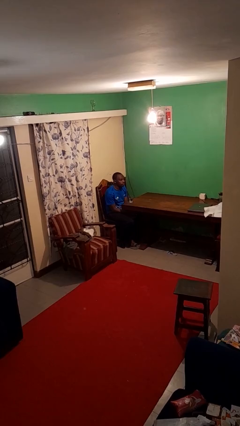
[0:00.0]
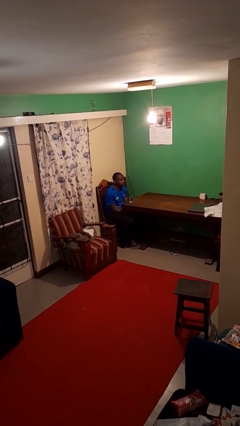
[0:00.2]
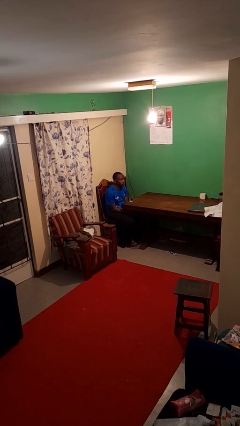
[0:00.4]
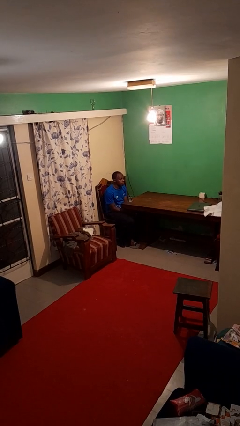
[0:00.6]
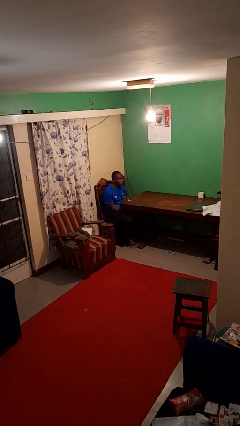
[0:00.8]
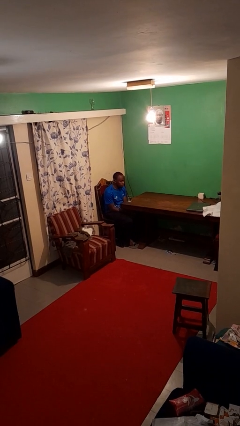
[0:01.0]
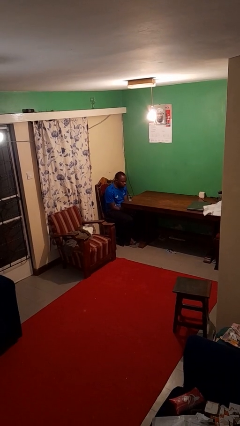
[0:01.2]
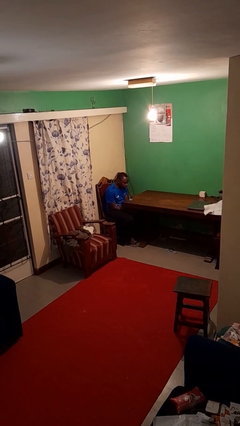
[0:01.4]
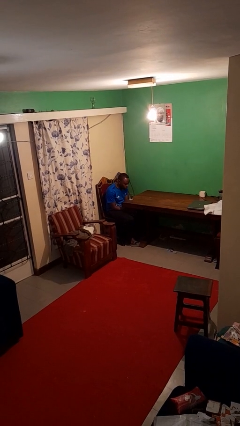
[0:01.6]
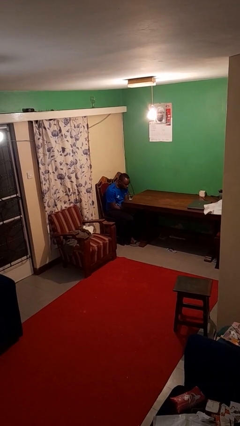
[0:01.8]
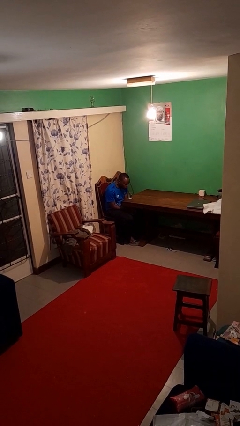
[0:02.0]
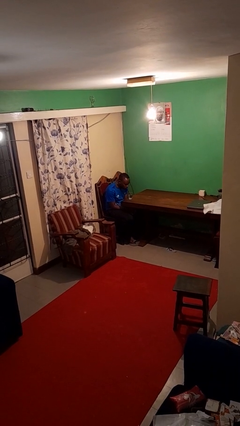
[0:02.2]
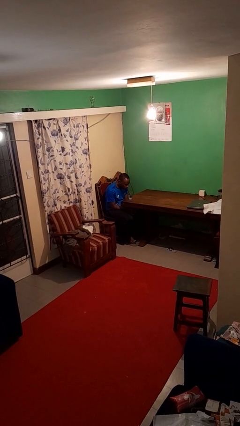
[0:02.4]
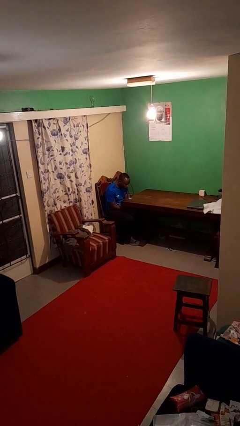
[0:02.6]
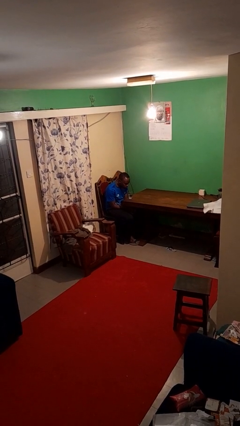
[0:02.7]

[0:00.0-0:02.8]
person drinks from straw

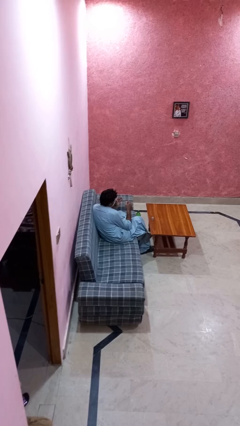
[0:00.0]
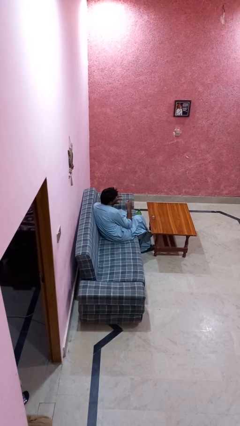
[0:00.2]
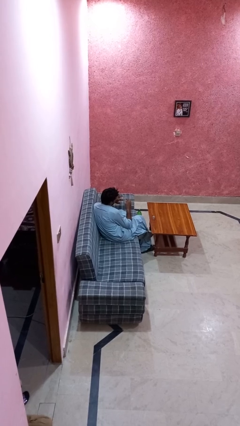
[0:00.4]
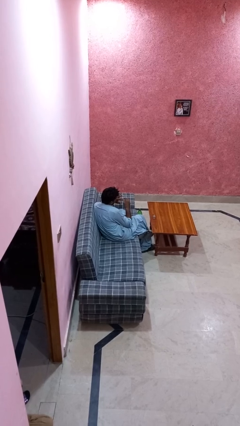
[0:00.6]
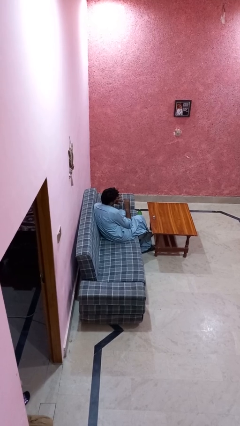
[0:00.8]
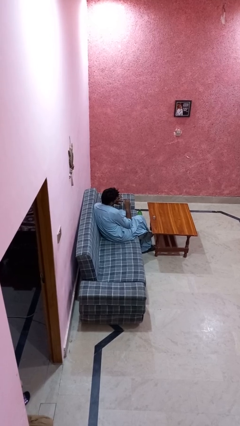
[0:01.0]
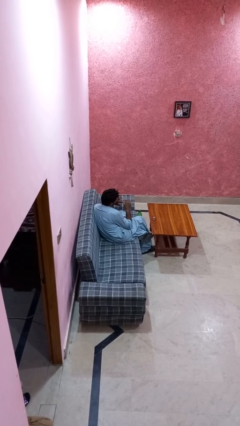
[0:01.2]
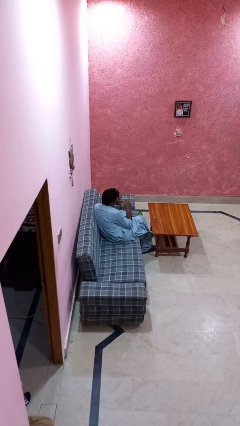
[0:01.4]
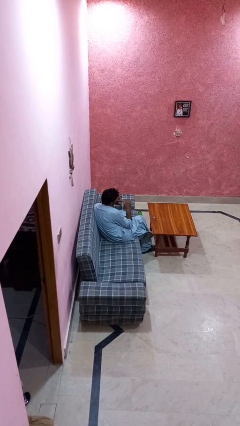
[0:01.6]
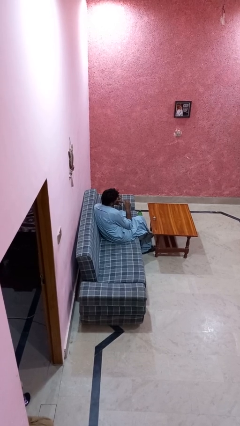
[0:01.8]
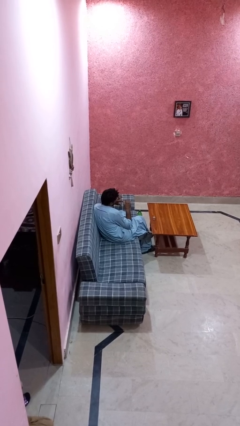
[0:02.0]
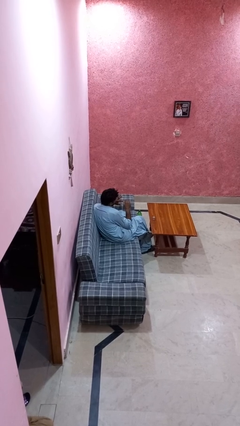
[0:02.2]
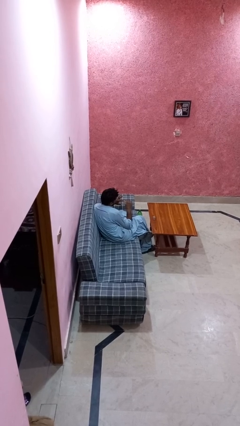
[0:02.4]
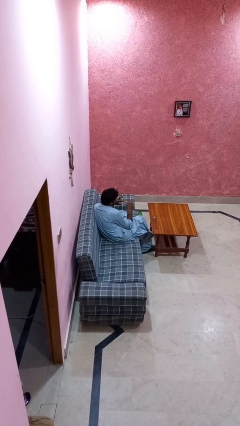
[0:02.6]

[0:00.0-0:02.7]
person paints fingernails

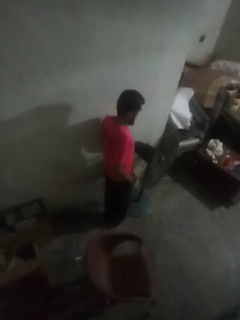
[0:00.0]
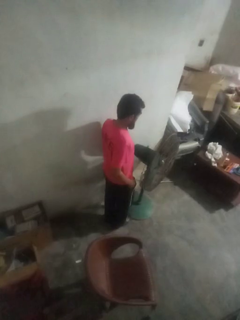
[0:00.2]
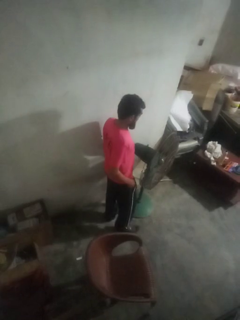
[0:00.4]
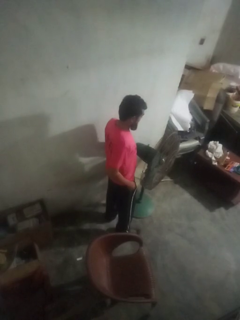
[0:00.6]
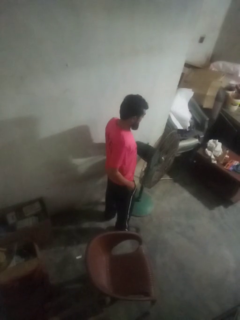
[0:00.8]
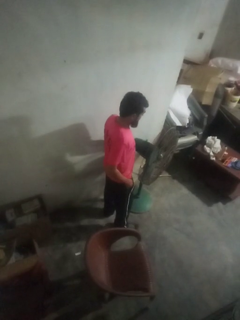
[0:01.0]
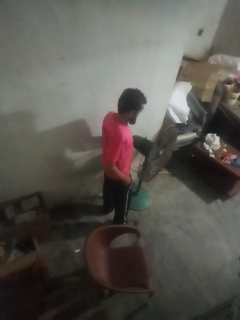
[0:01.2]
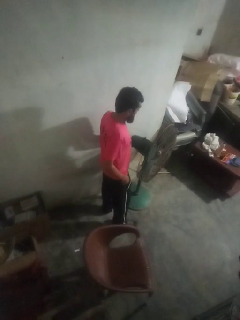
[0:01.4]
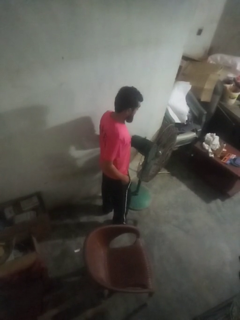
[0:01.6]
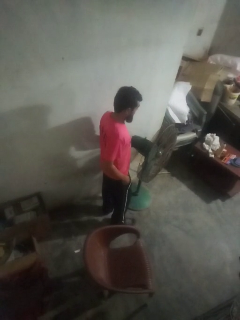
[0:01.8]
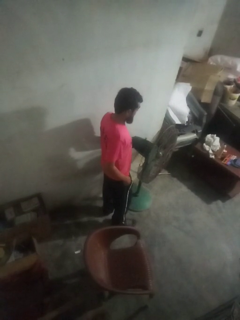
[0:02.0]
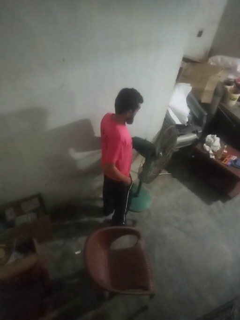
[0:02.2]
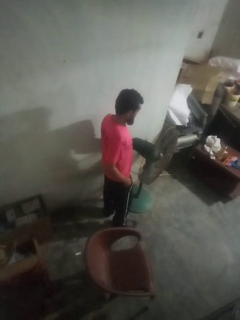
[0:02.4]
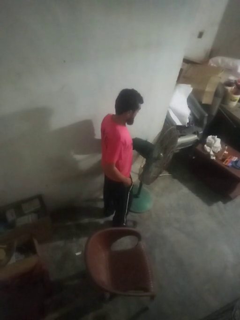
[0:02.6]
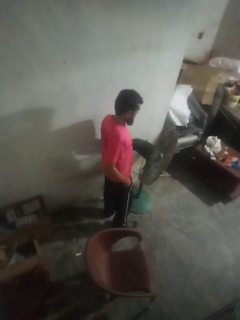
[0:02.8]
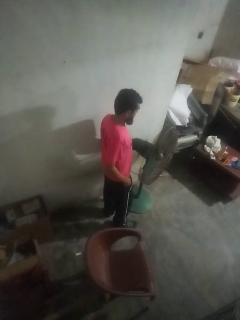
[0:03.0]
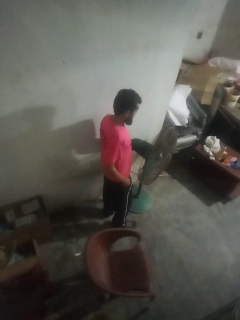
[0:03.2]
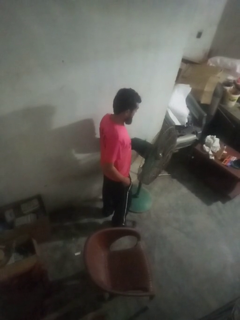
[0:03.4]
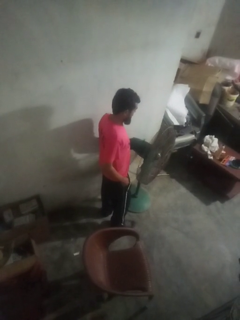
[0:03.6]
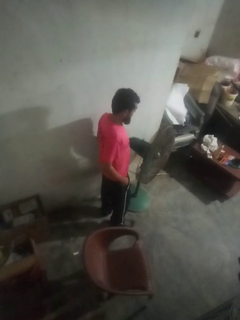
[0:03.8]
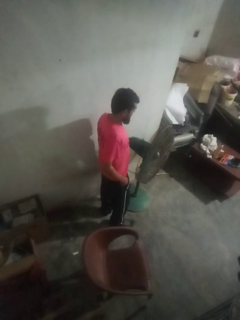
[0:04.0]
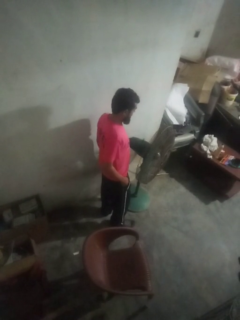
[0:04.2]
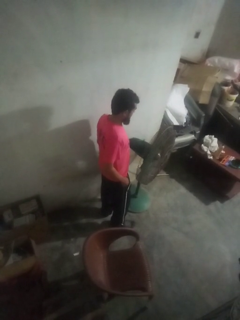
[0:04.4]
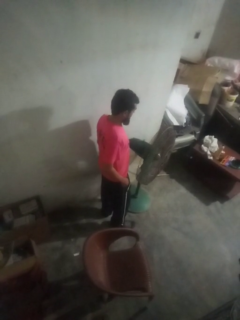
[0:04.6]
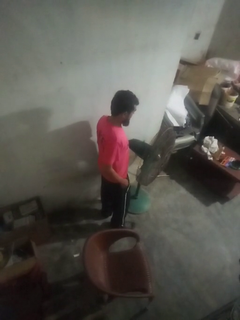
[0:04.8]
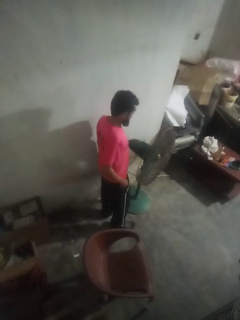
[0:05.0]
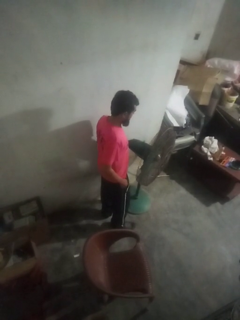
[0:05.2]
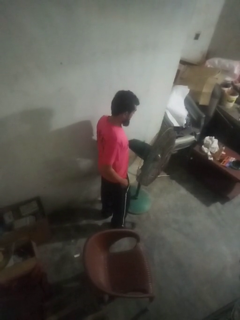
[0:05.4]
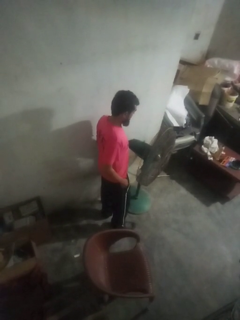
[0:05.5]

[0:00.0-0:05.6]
person turns on fan

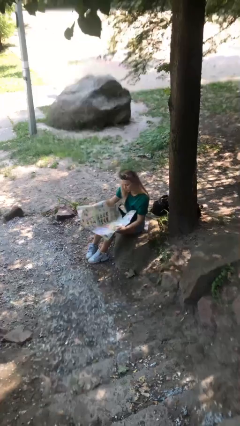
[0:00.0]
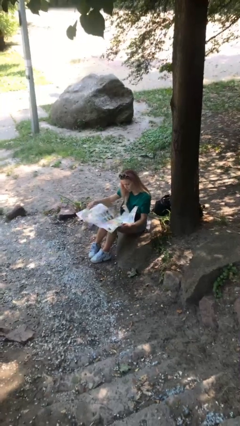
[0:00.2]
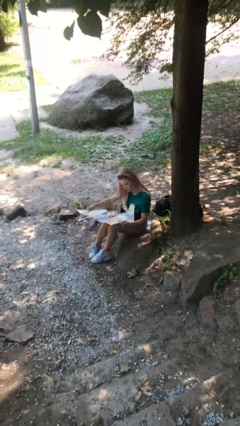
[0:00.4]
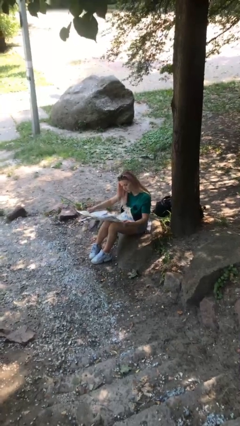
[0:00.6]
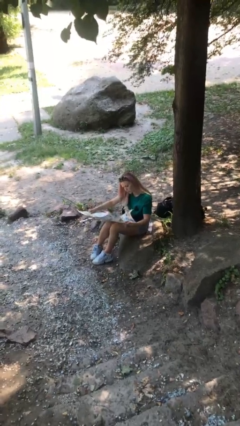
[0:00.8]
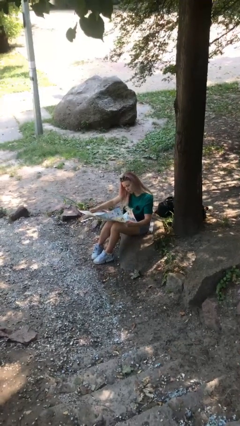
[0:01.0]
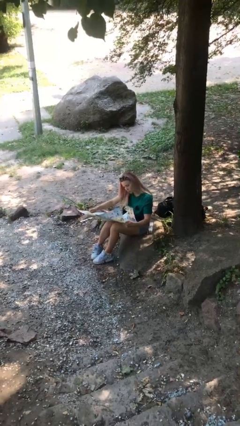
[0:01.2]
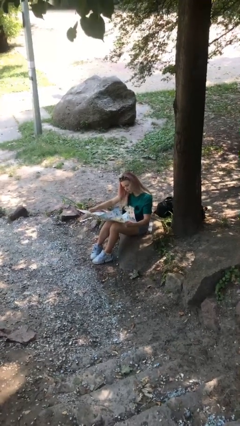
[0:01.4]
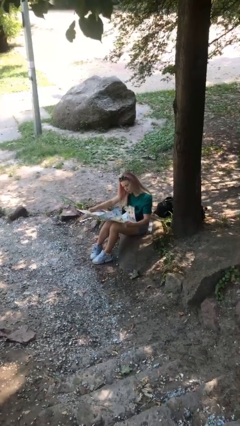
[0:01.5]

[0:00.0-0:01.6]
person reads newspaper

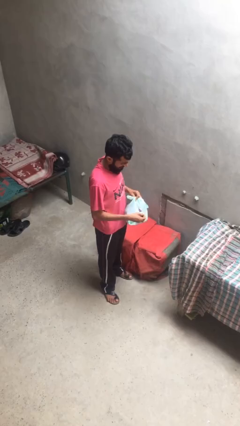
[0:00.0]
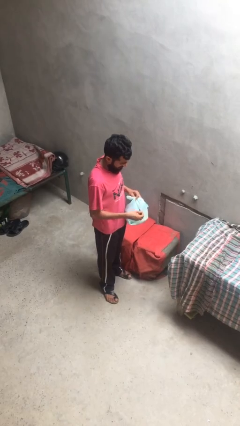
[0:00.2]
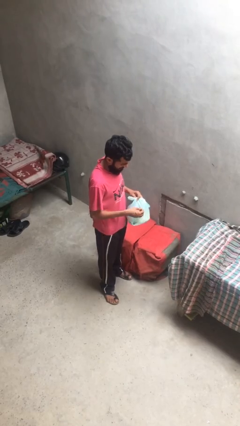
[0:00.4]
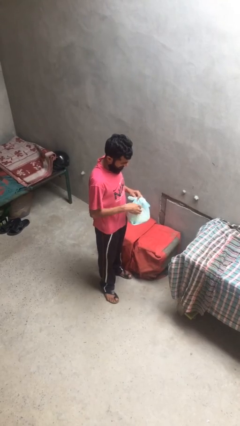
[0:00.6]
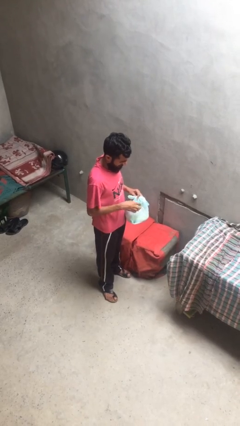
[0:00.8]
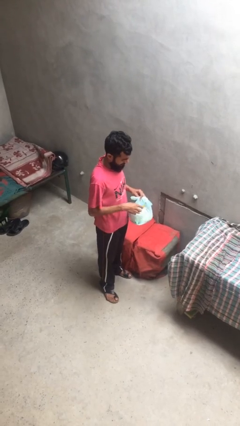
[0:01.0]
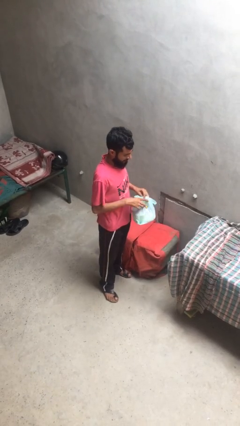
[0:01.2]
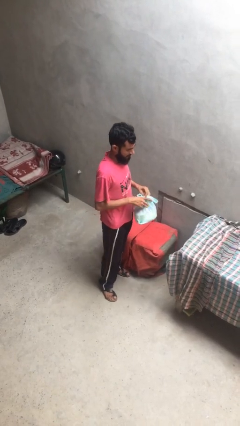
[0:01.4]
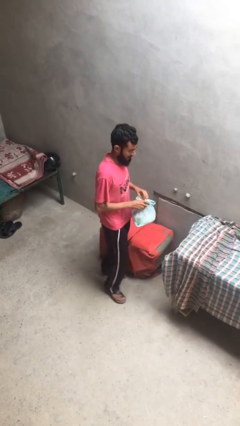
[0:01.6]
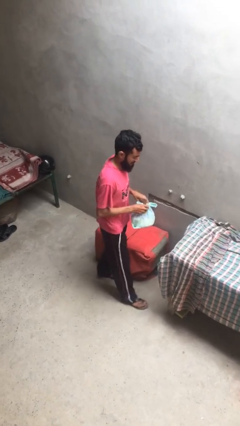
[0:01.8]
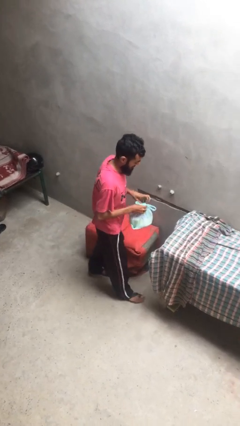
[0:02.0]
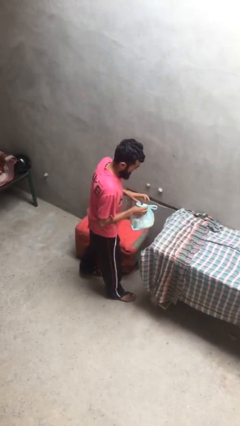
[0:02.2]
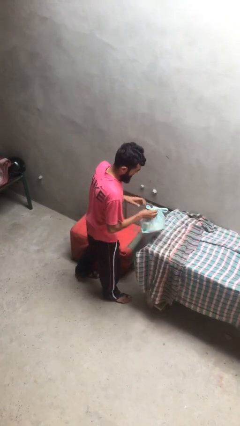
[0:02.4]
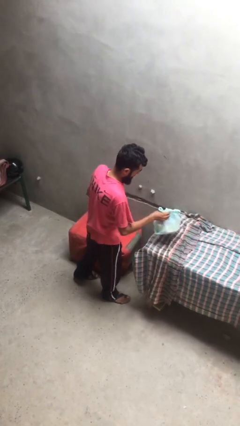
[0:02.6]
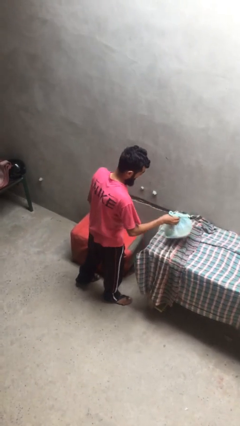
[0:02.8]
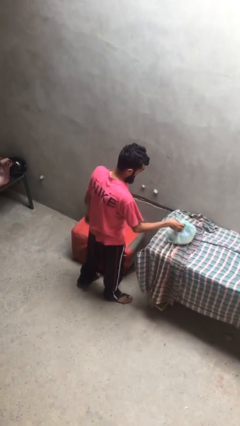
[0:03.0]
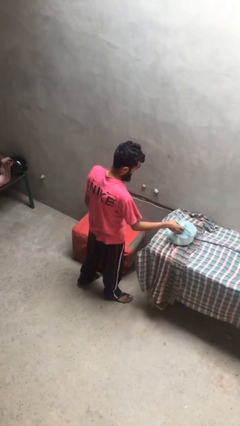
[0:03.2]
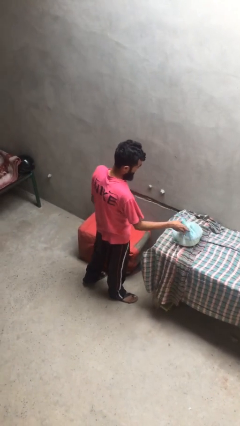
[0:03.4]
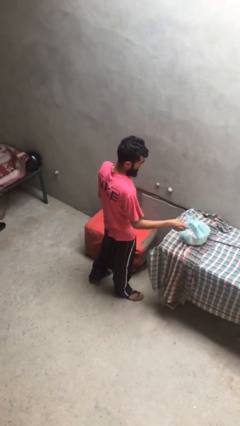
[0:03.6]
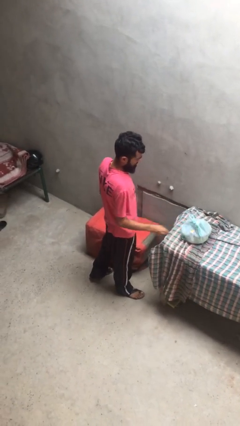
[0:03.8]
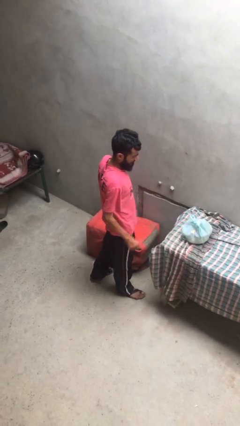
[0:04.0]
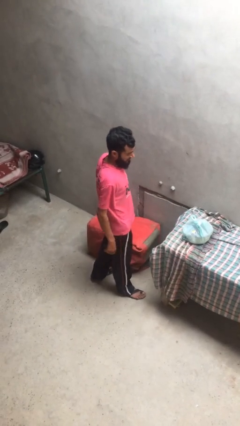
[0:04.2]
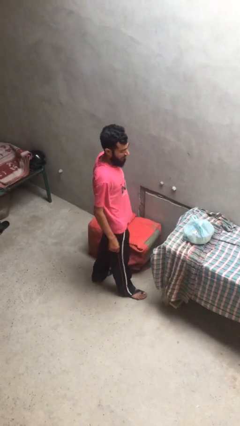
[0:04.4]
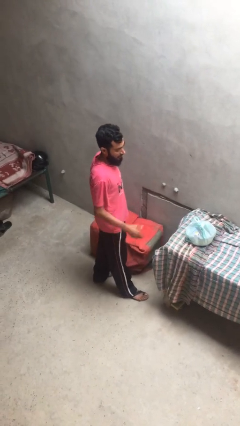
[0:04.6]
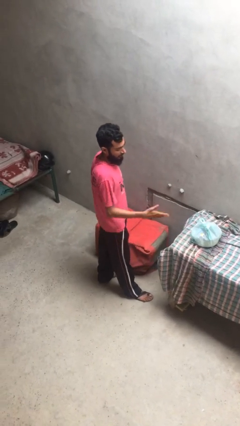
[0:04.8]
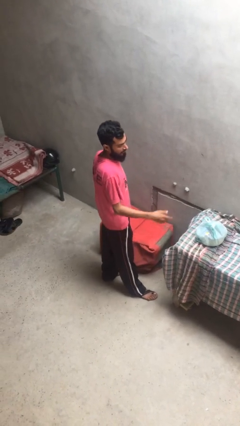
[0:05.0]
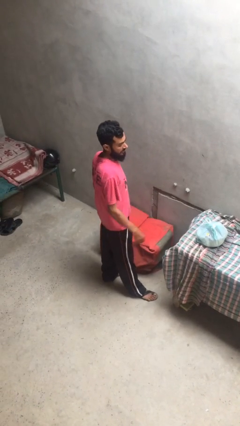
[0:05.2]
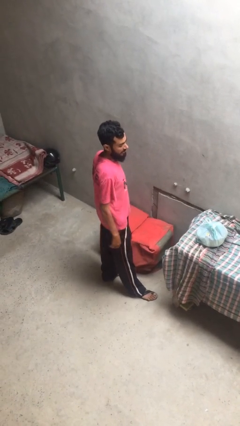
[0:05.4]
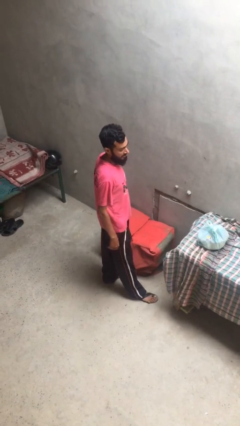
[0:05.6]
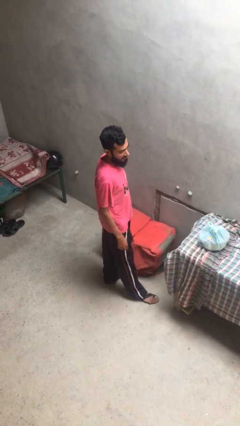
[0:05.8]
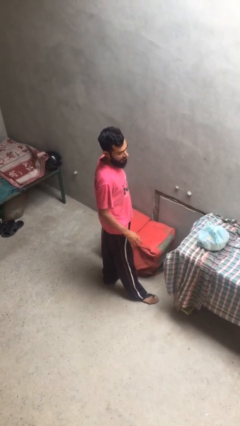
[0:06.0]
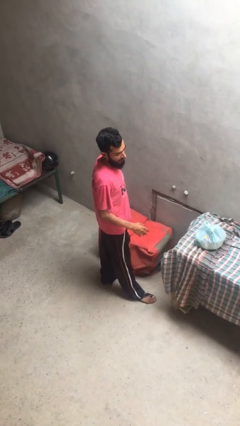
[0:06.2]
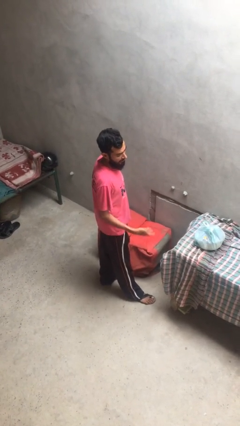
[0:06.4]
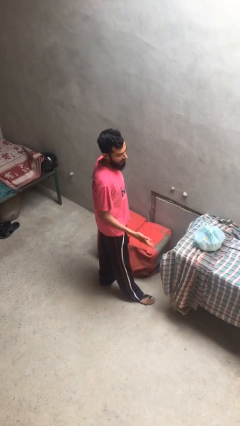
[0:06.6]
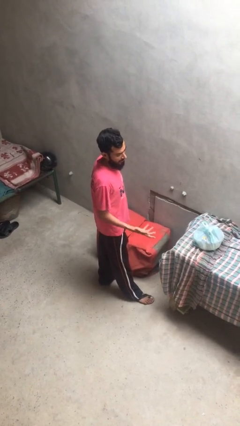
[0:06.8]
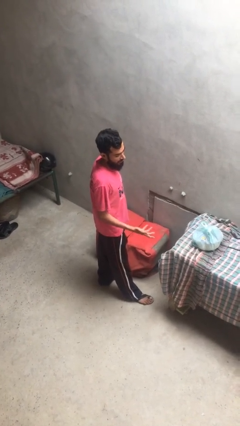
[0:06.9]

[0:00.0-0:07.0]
person puts down object on shelf
